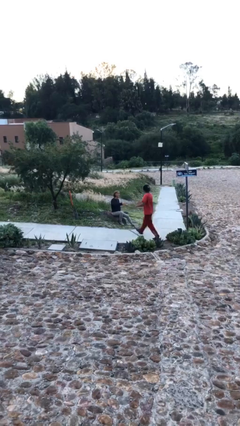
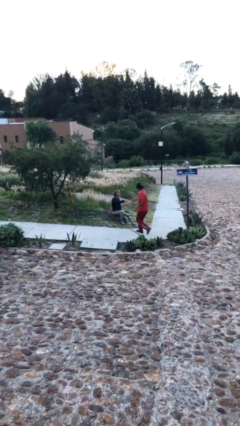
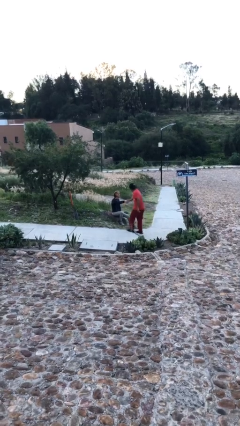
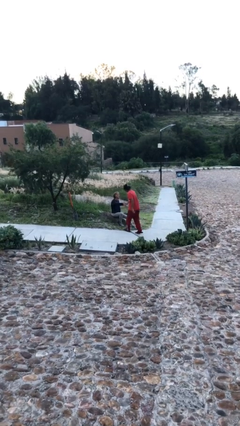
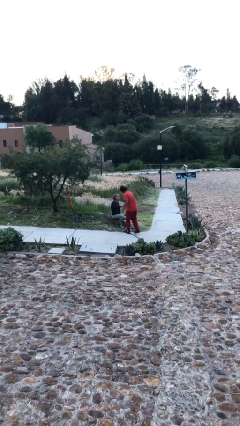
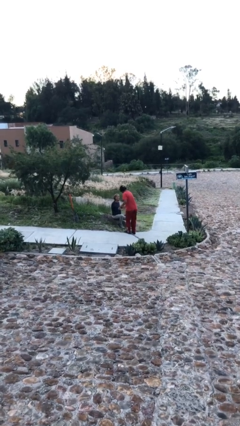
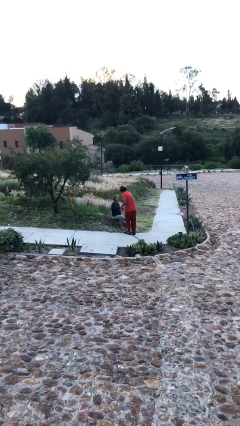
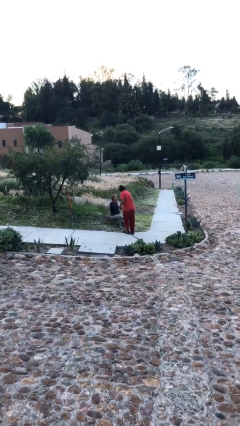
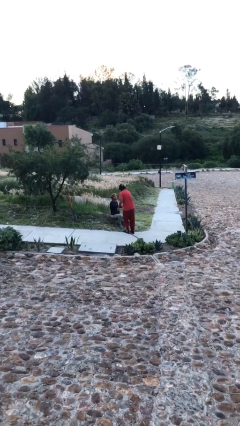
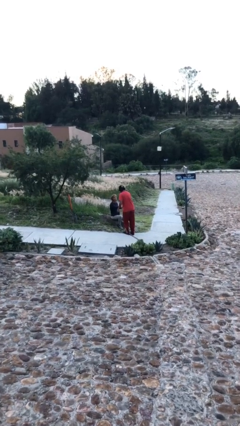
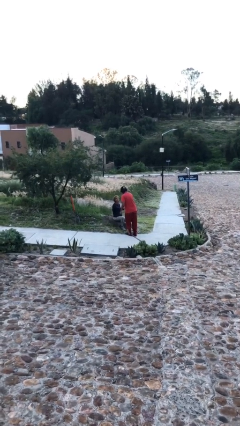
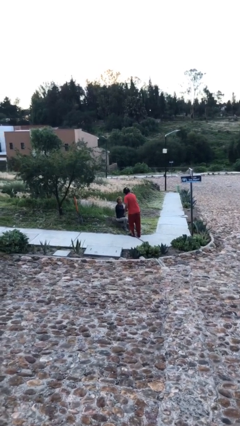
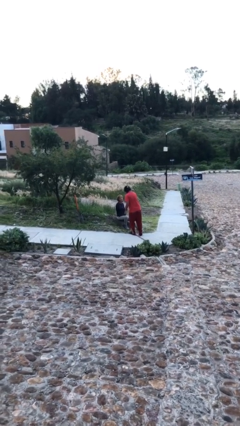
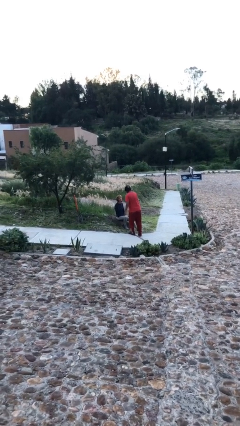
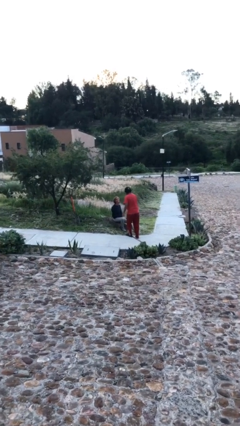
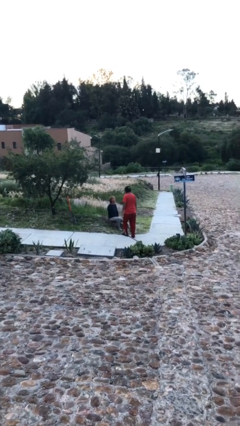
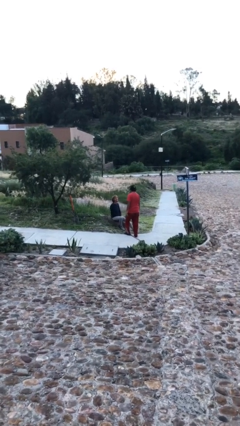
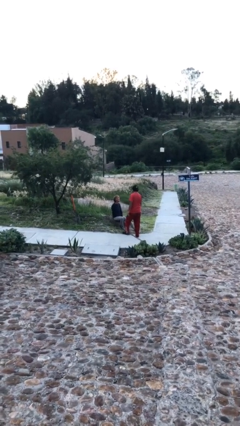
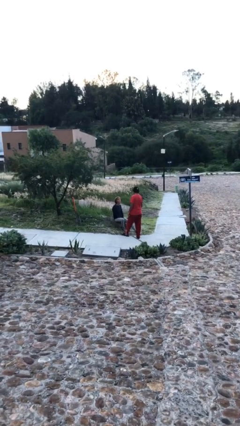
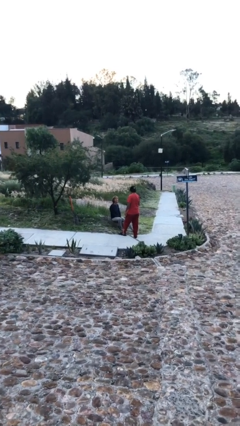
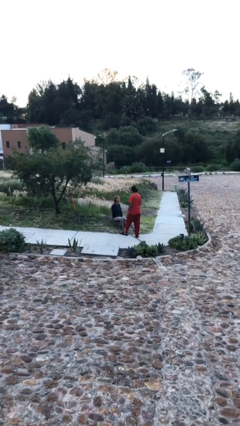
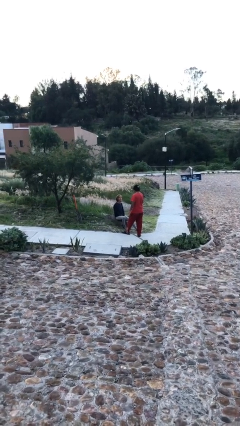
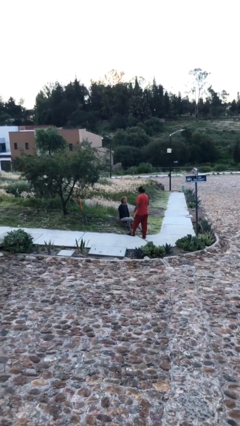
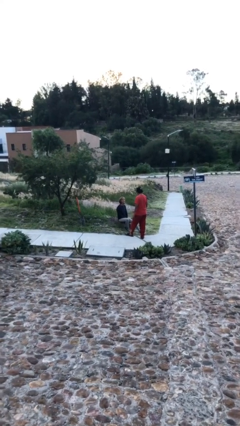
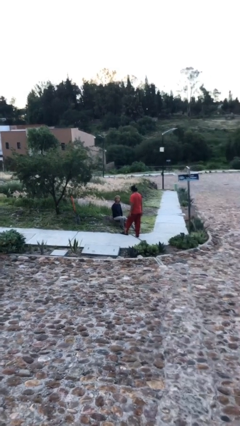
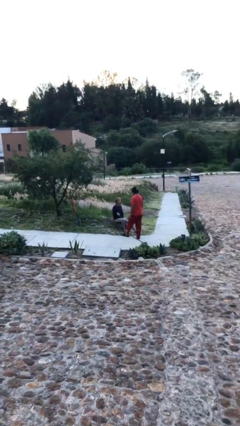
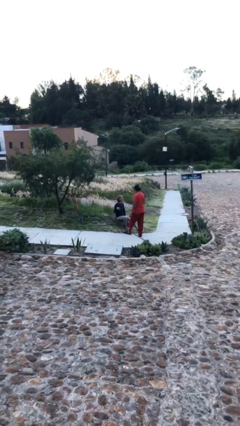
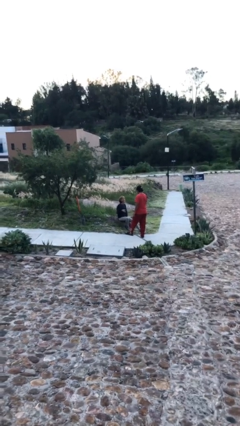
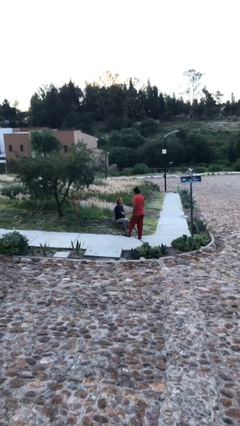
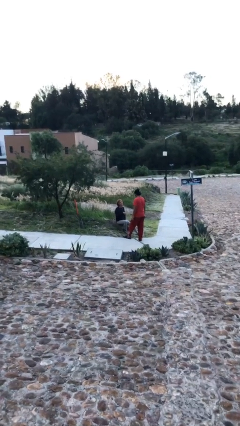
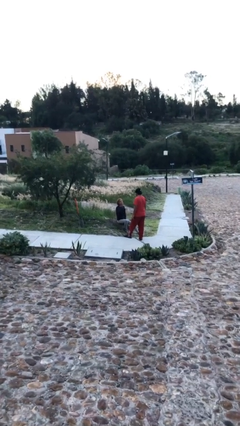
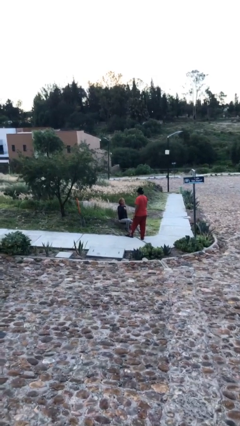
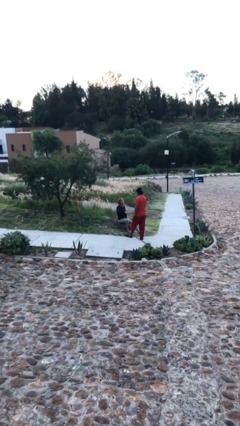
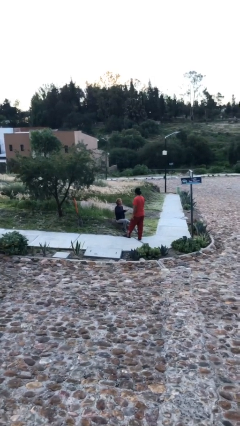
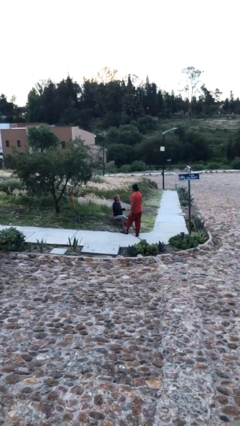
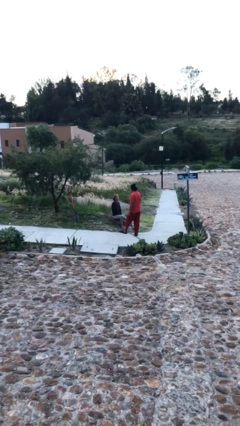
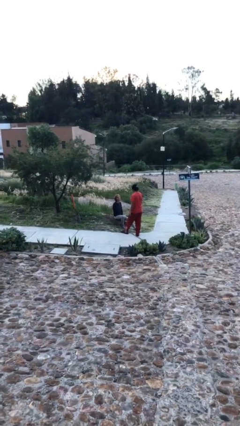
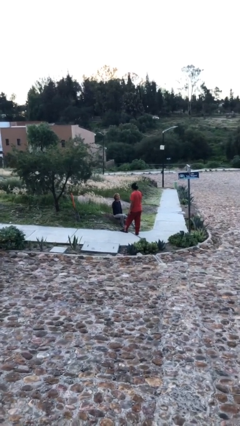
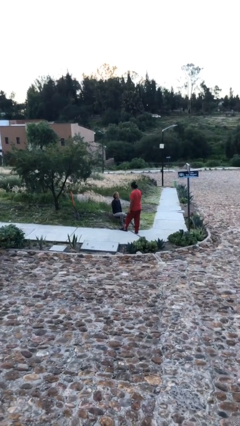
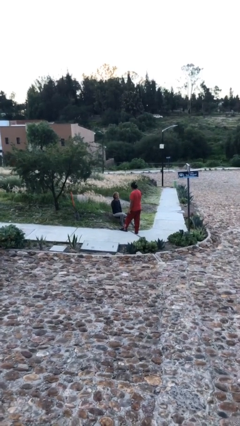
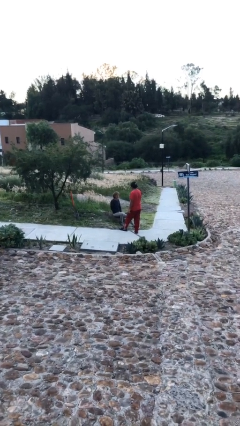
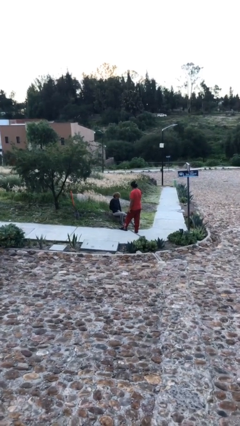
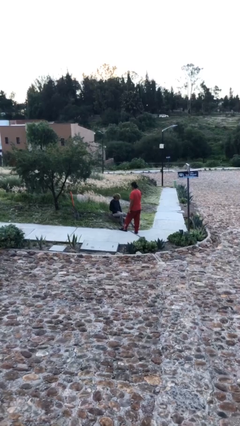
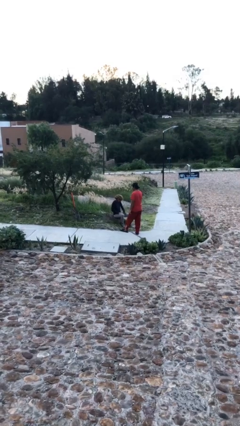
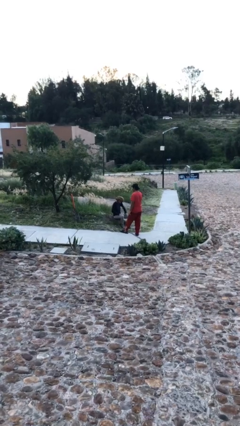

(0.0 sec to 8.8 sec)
person shakes hand

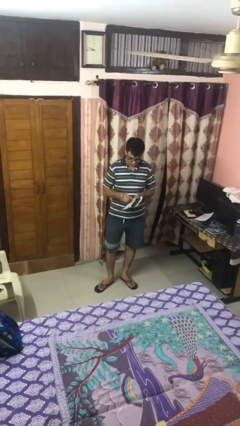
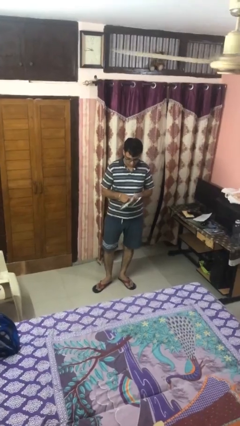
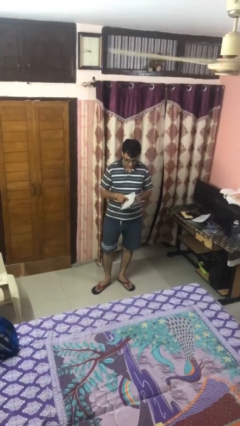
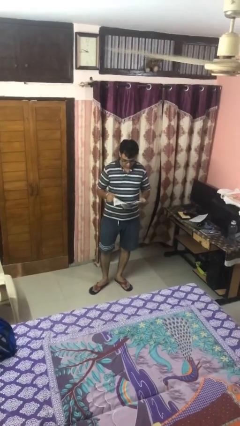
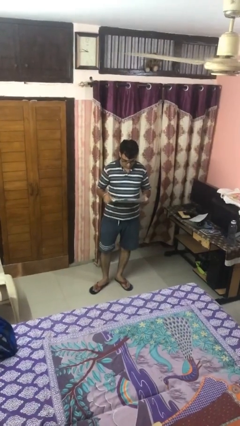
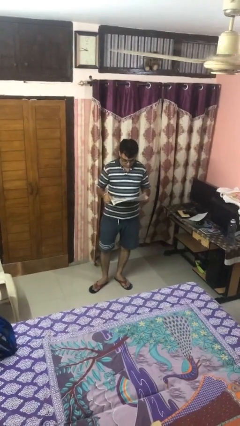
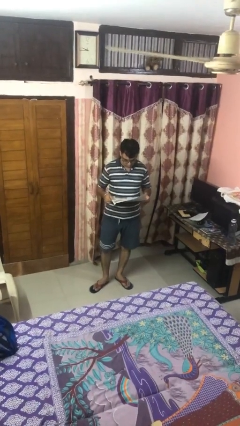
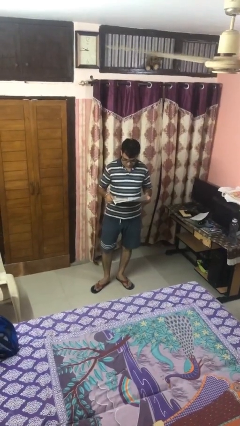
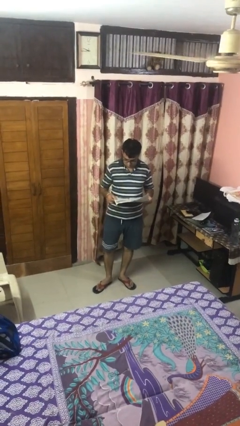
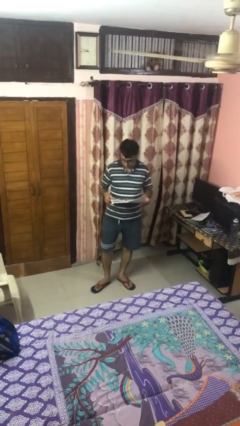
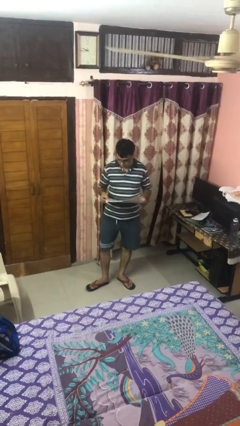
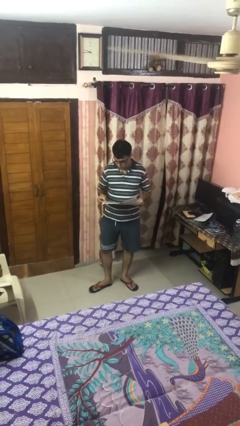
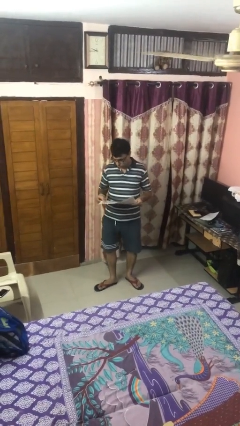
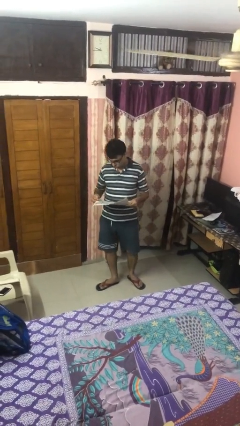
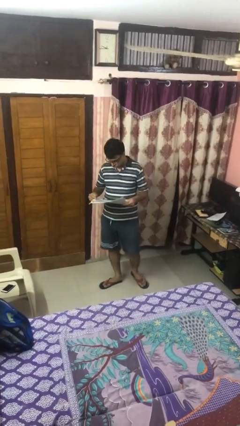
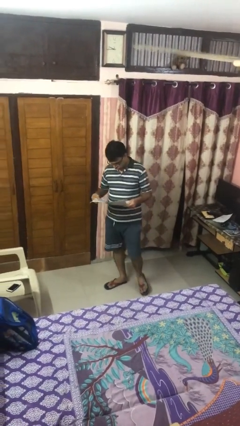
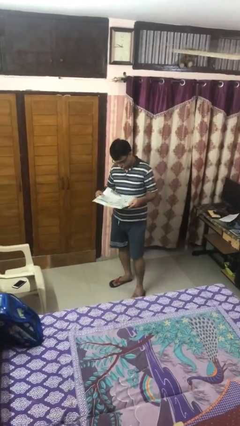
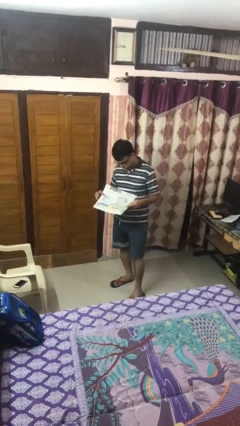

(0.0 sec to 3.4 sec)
person reads newspaper

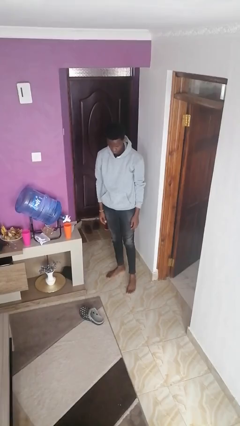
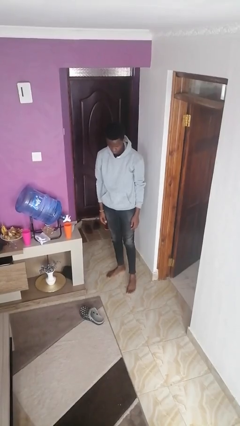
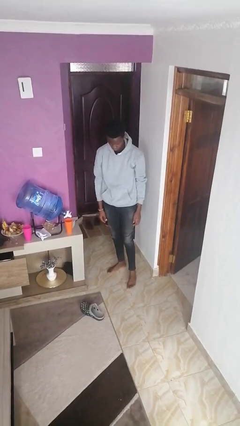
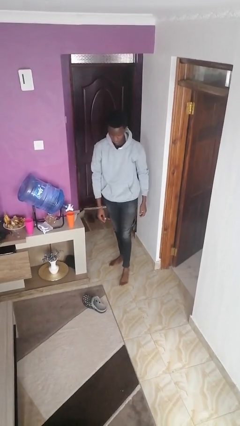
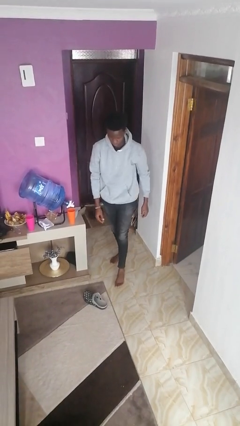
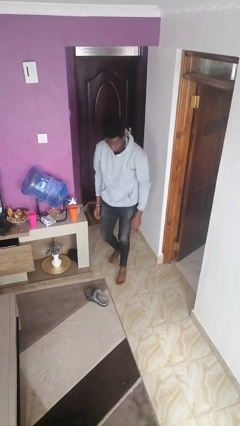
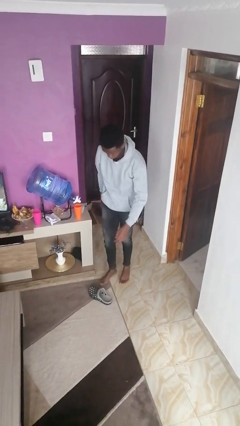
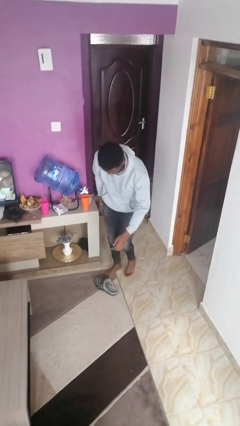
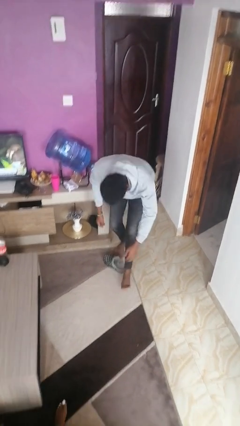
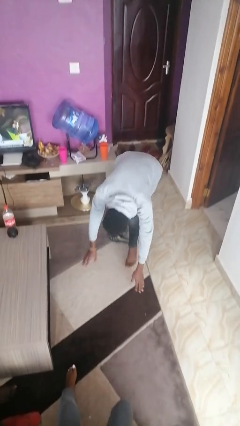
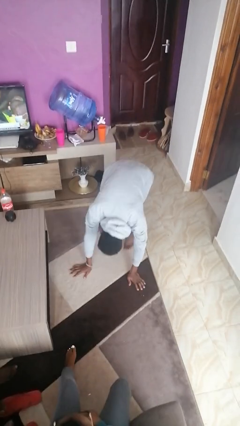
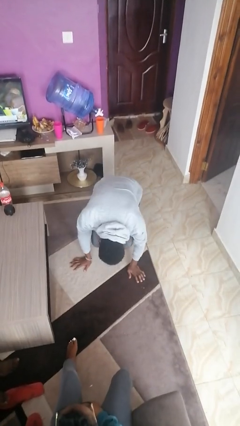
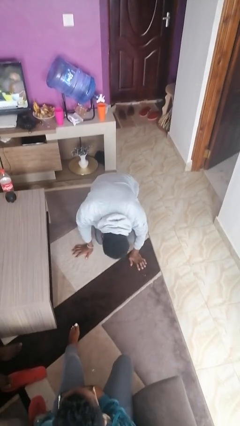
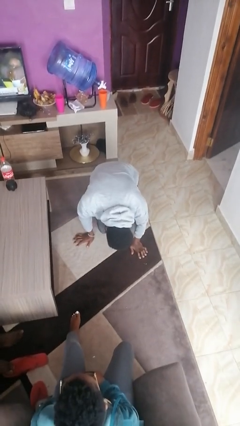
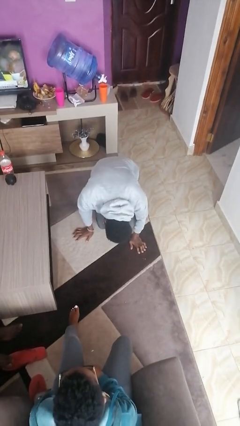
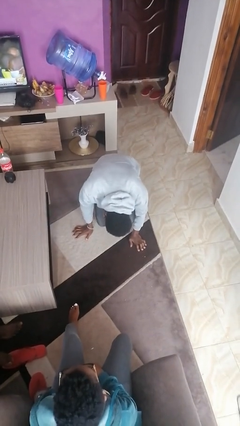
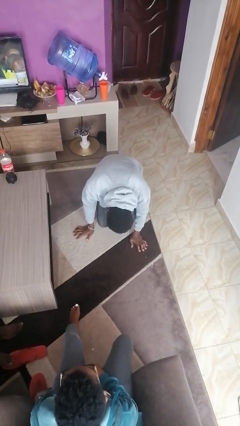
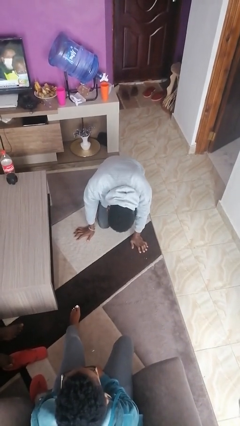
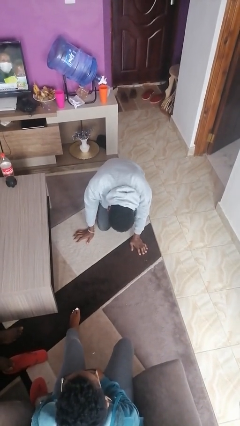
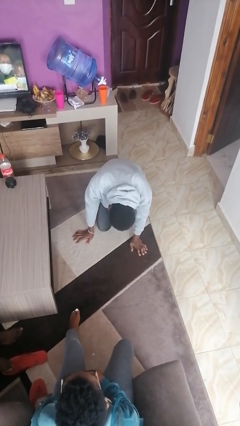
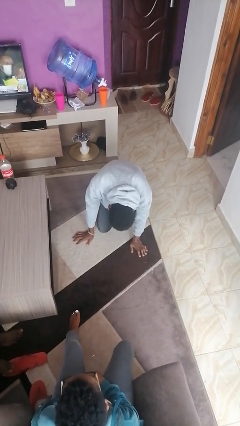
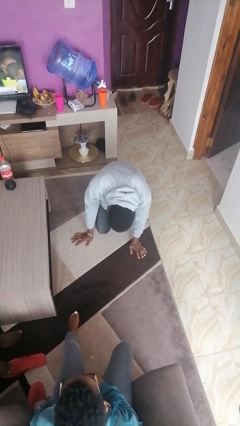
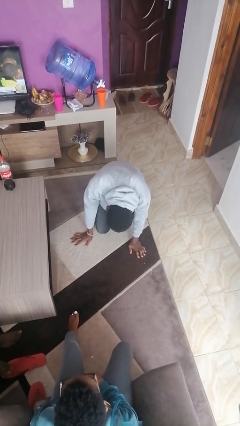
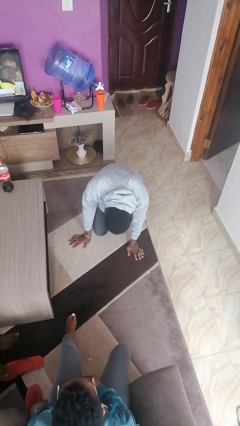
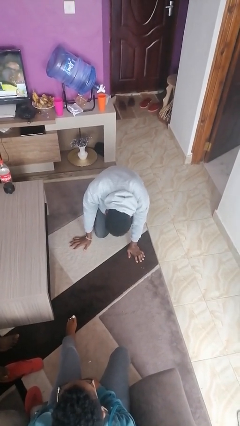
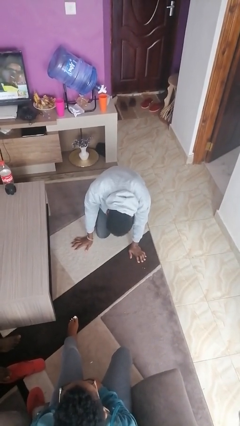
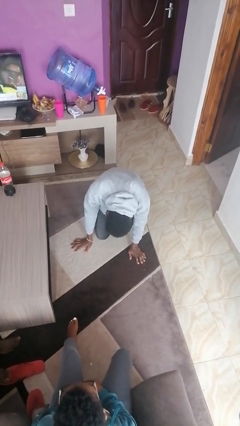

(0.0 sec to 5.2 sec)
person trips on object on floor

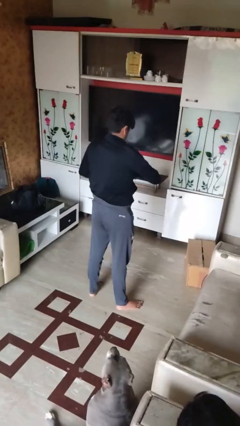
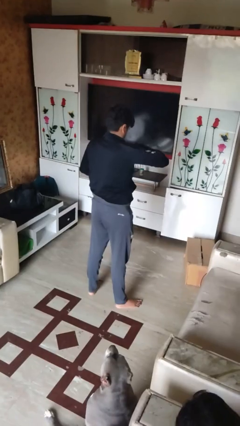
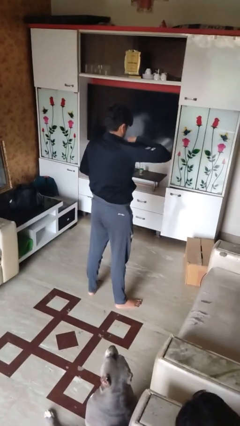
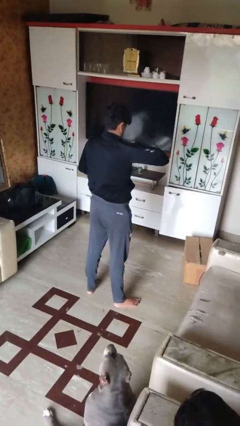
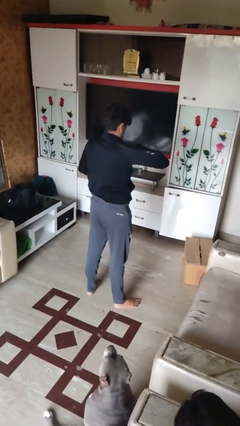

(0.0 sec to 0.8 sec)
person zips up jacket
